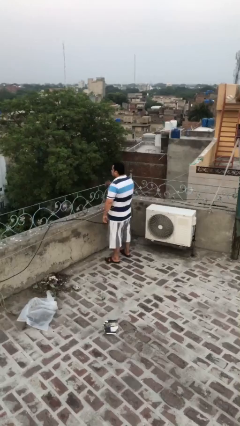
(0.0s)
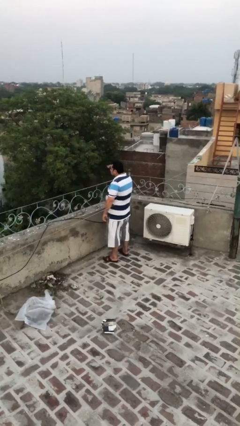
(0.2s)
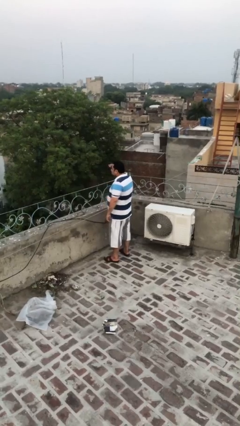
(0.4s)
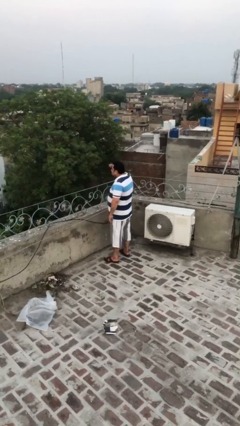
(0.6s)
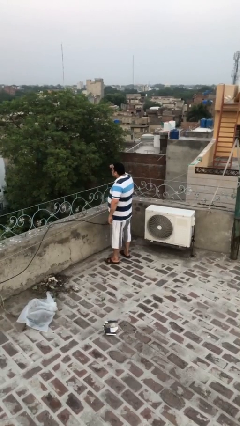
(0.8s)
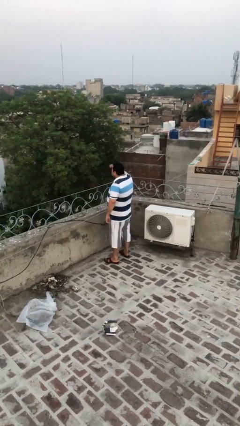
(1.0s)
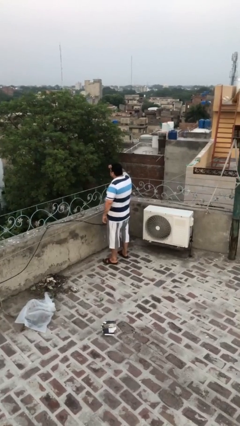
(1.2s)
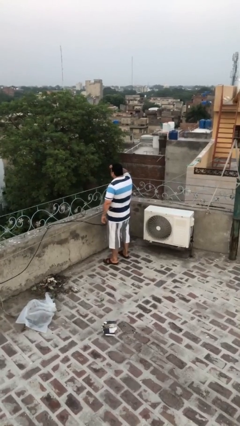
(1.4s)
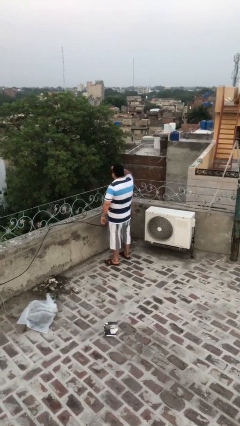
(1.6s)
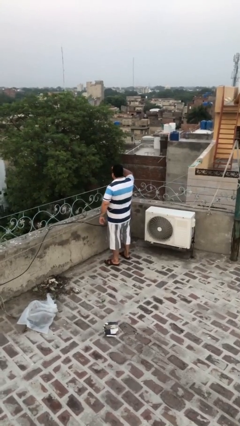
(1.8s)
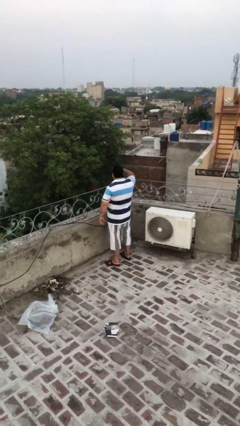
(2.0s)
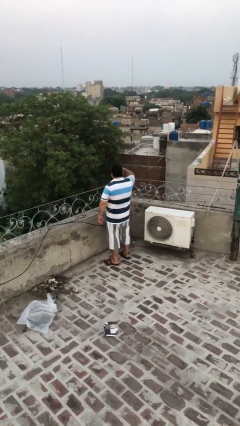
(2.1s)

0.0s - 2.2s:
person shades eyes

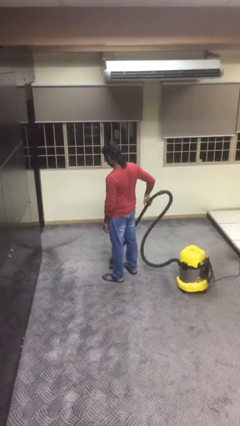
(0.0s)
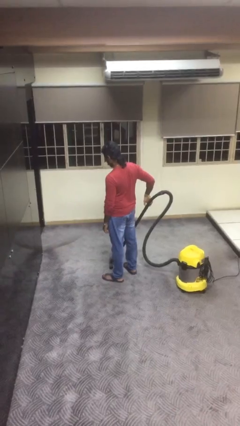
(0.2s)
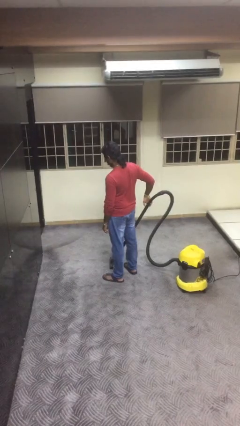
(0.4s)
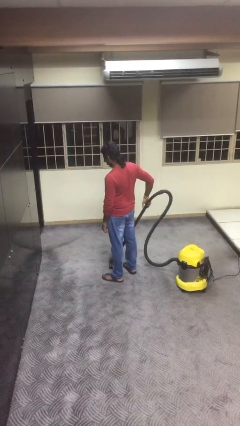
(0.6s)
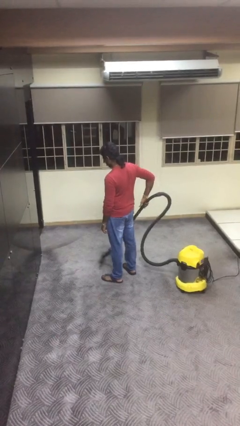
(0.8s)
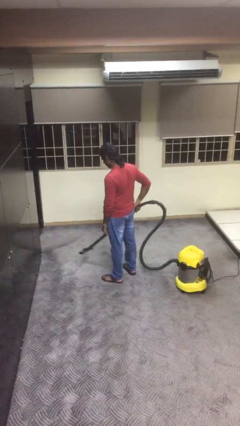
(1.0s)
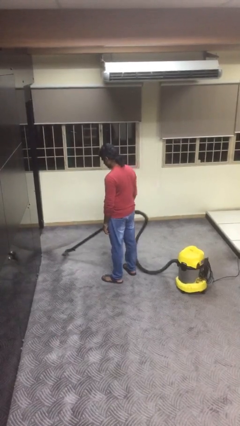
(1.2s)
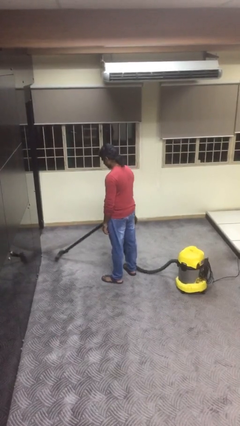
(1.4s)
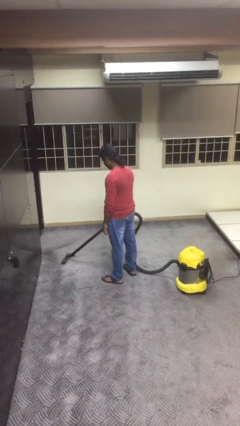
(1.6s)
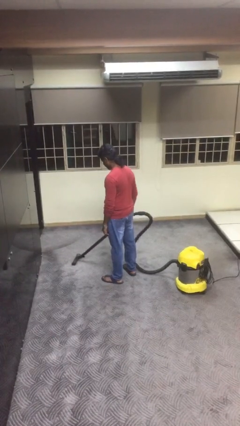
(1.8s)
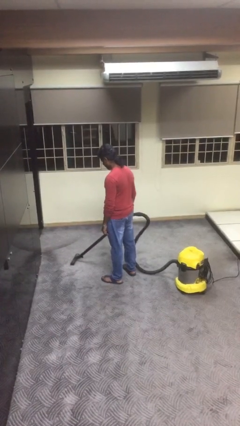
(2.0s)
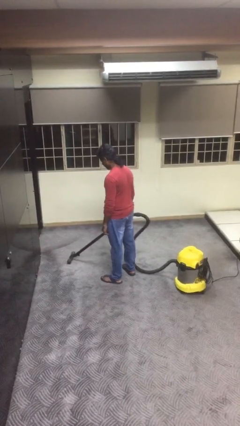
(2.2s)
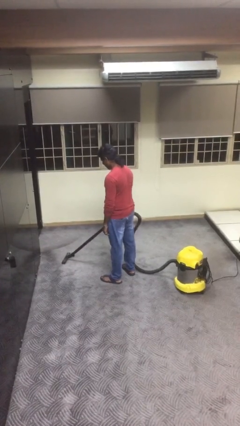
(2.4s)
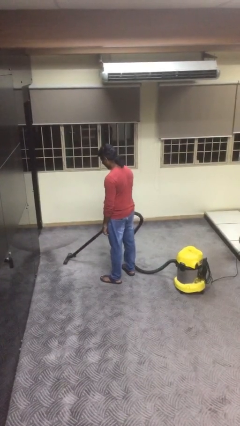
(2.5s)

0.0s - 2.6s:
person vacuums carpet

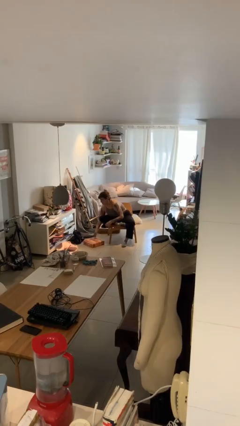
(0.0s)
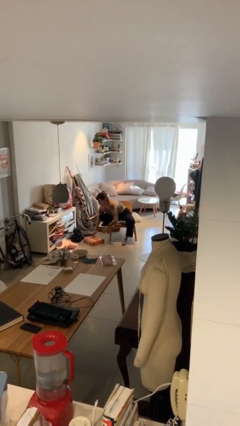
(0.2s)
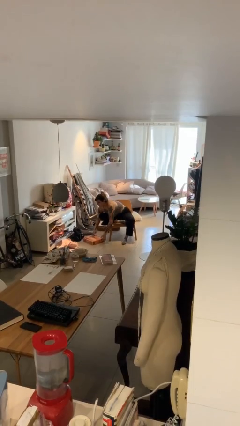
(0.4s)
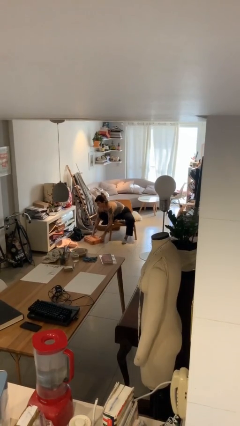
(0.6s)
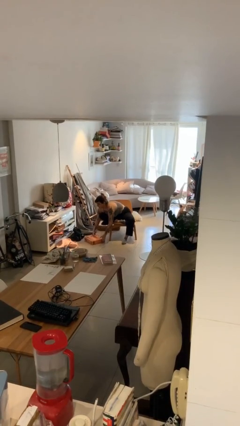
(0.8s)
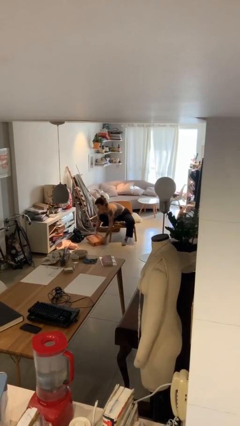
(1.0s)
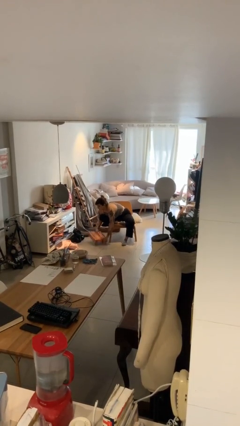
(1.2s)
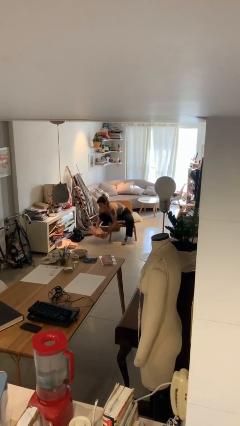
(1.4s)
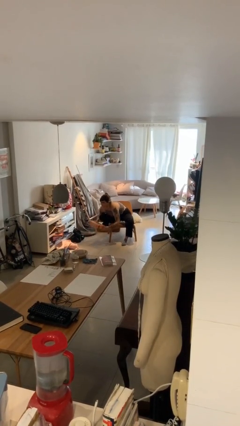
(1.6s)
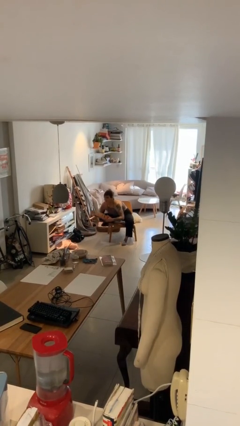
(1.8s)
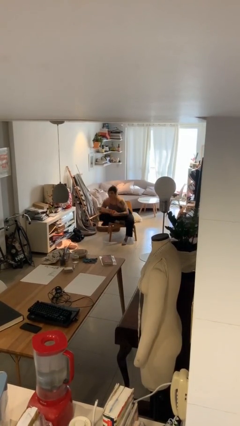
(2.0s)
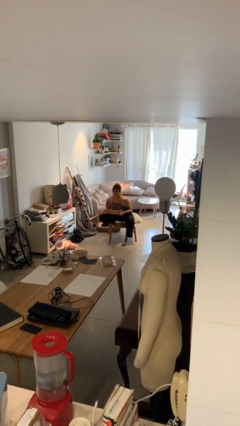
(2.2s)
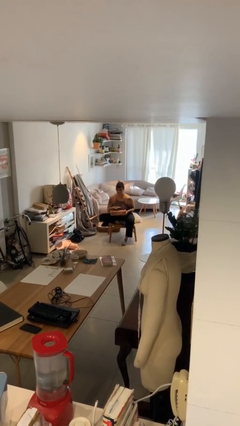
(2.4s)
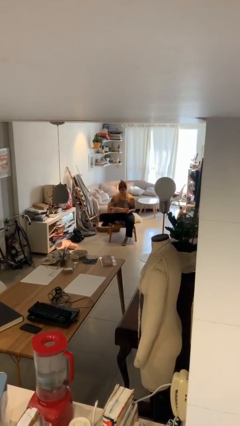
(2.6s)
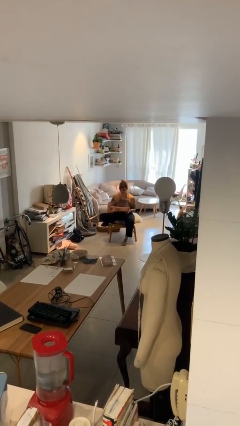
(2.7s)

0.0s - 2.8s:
person picks up object from floor

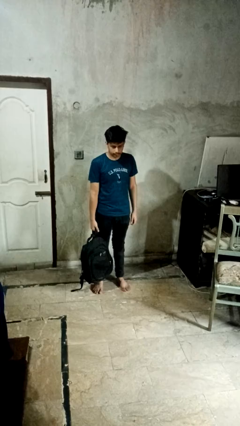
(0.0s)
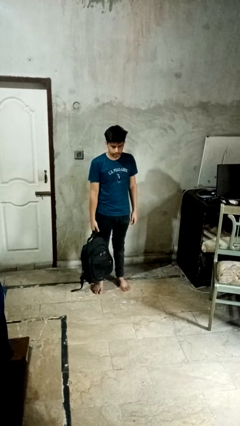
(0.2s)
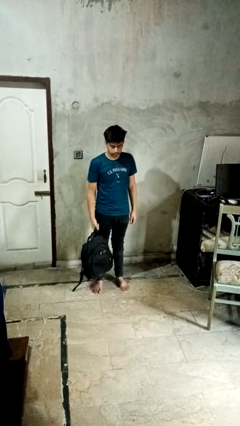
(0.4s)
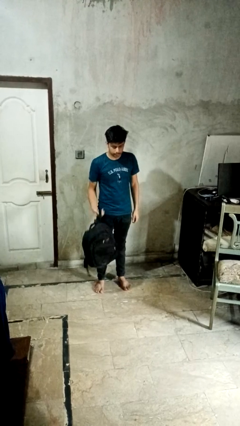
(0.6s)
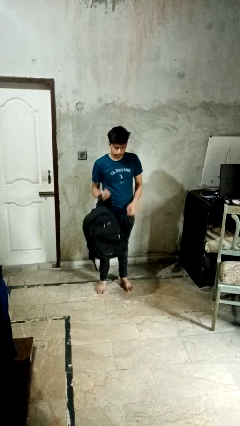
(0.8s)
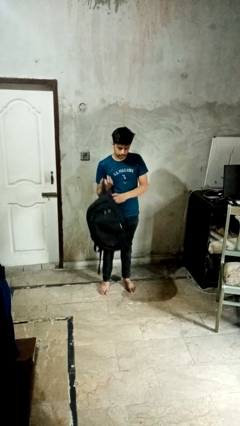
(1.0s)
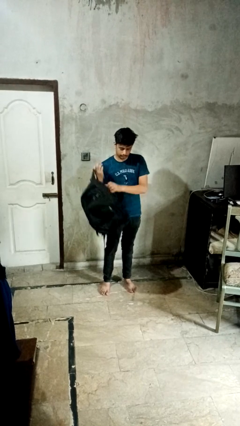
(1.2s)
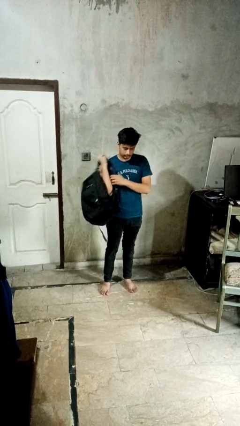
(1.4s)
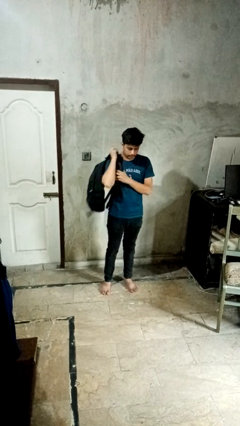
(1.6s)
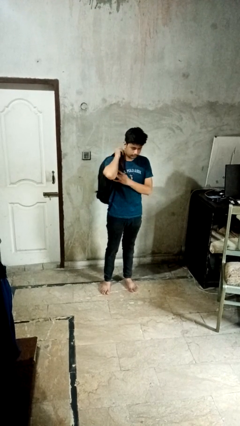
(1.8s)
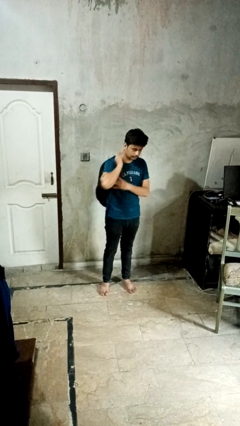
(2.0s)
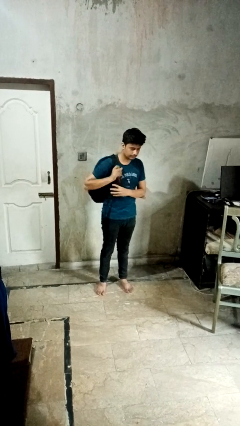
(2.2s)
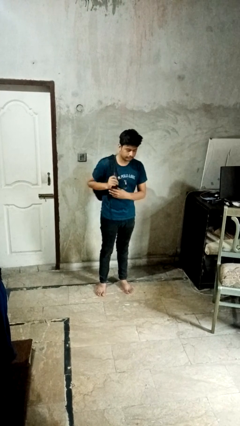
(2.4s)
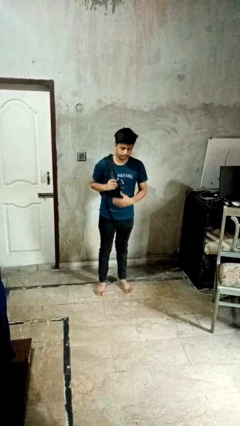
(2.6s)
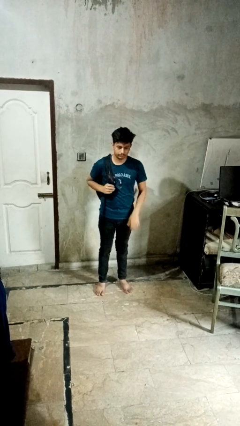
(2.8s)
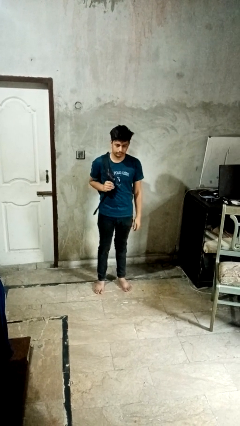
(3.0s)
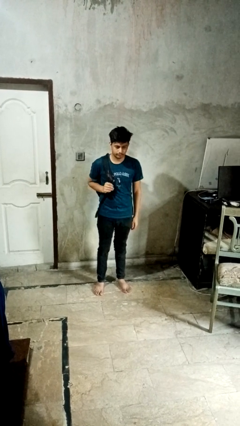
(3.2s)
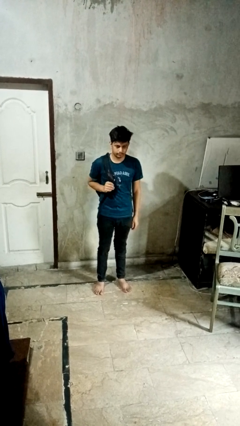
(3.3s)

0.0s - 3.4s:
person puts on backpack

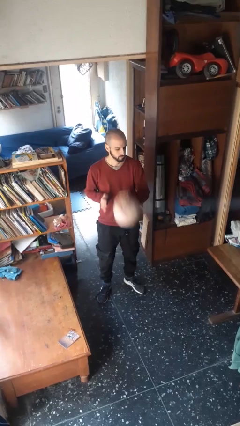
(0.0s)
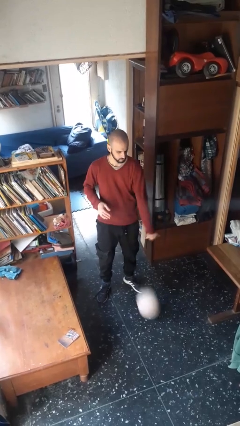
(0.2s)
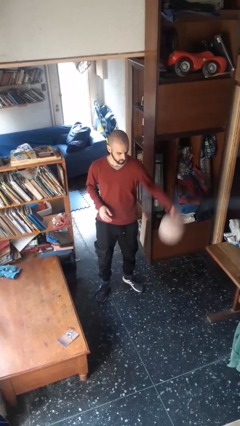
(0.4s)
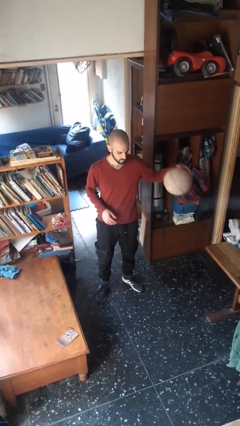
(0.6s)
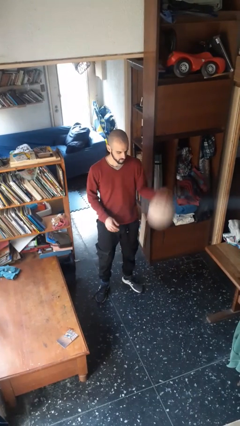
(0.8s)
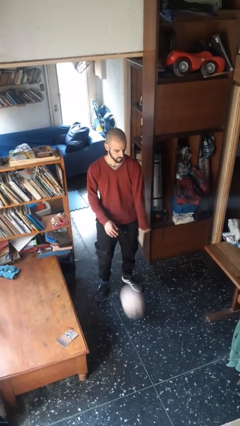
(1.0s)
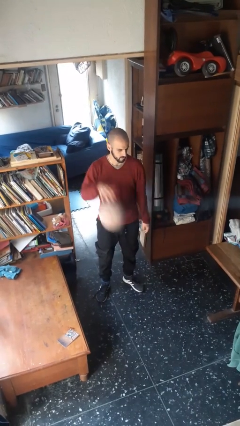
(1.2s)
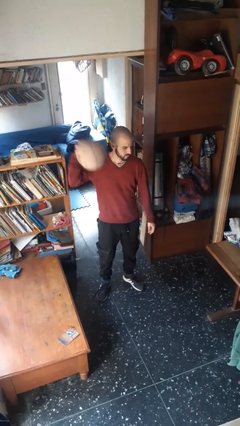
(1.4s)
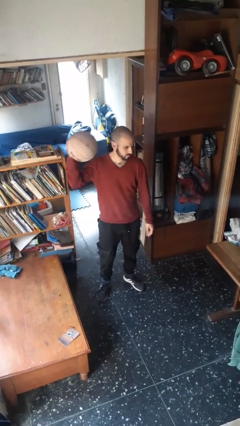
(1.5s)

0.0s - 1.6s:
person bounces ball on floor

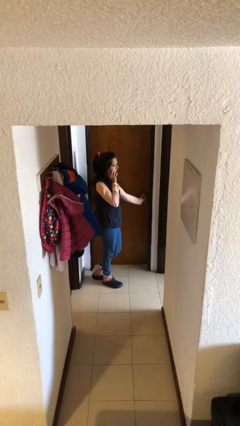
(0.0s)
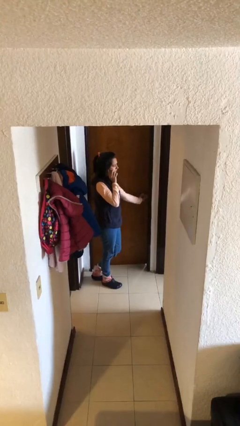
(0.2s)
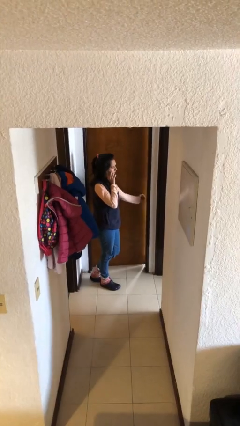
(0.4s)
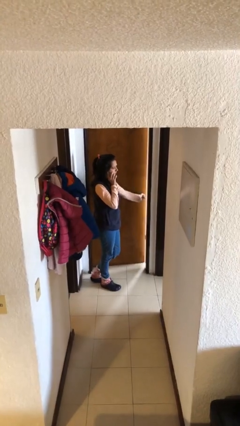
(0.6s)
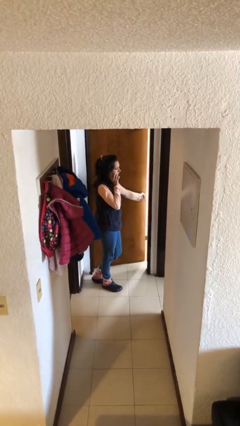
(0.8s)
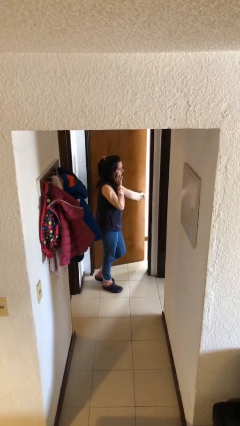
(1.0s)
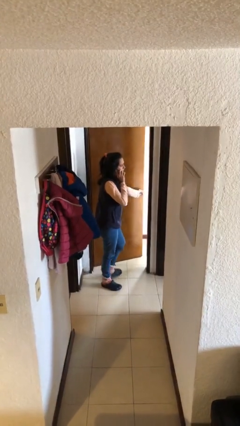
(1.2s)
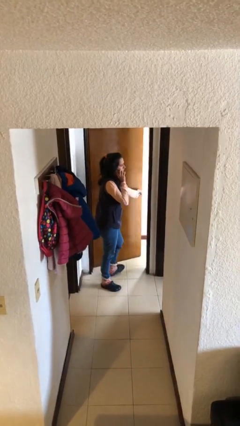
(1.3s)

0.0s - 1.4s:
person opens facility door

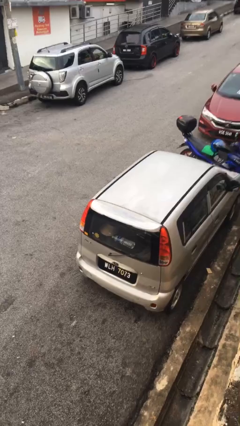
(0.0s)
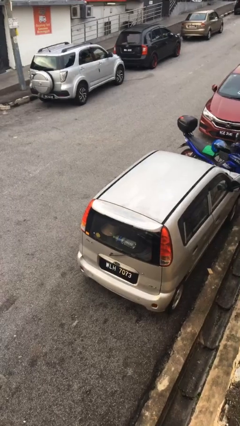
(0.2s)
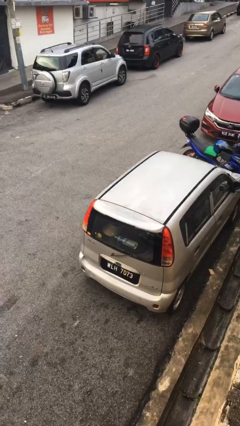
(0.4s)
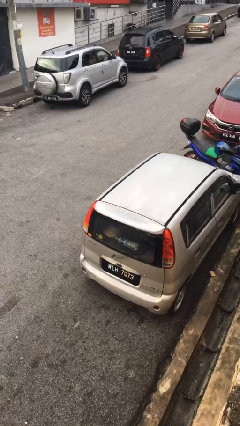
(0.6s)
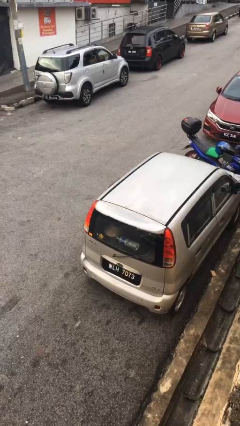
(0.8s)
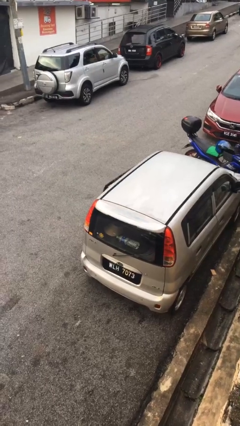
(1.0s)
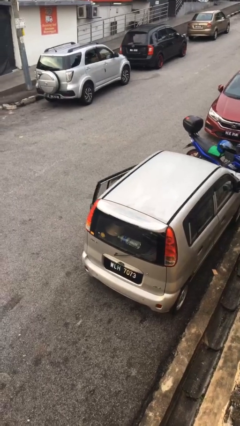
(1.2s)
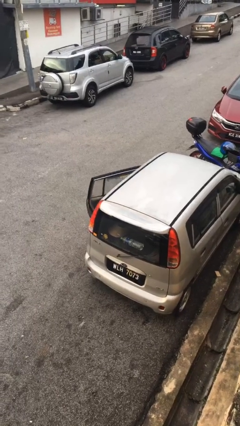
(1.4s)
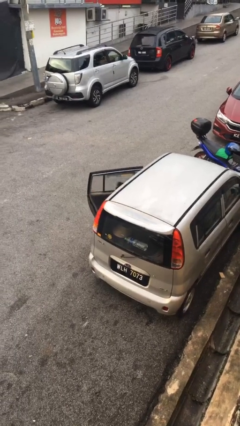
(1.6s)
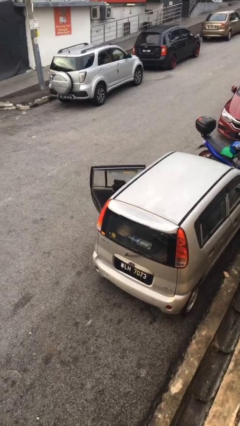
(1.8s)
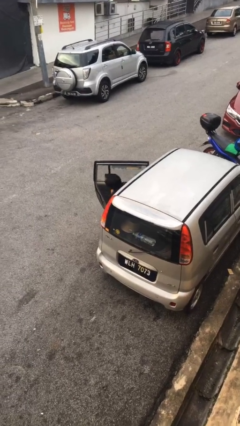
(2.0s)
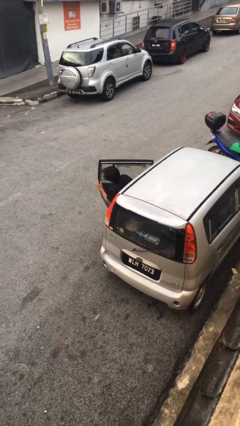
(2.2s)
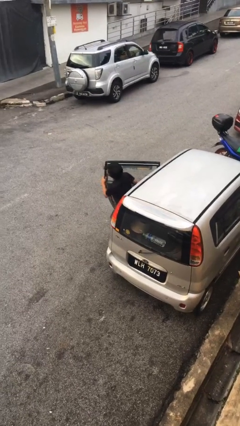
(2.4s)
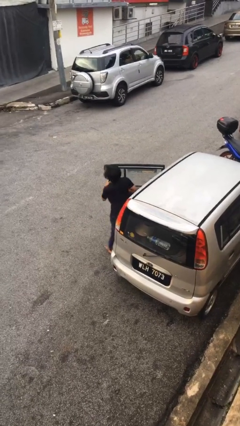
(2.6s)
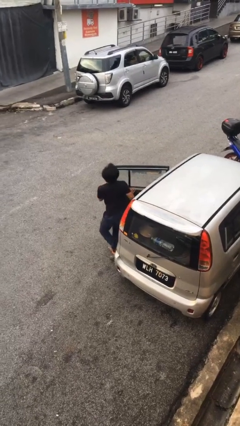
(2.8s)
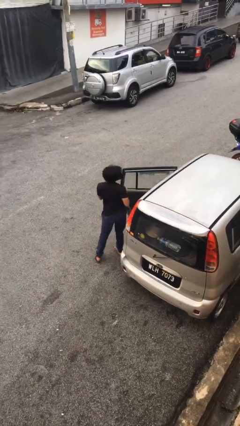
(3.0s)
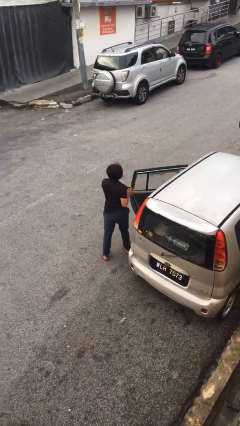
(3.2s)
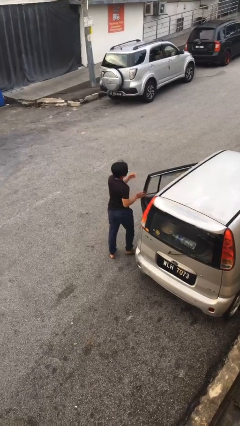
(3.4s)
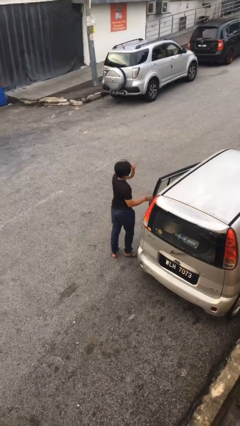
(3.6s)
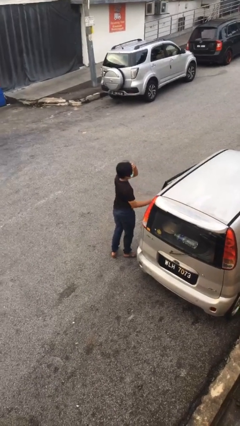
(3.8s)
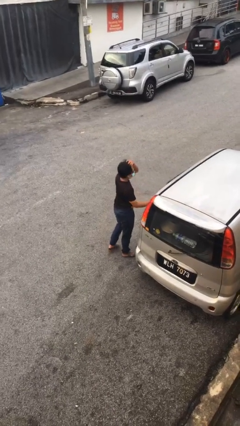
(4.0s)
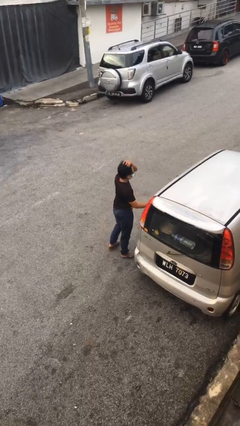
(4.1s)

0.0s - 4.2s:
person exits car
